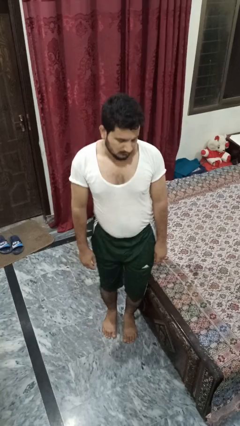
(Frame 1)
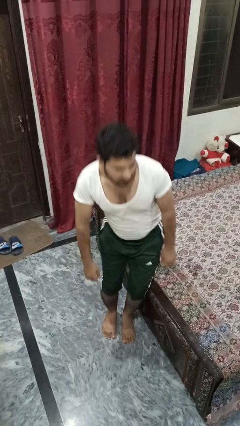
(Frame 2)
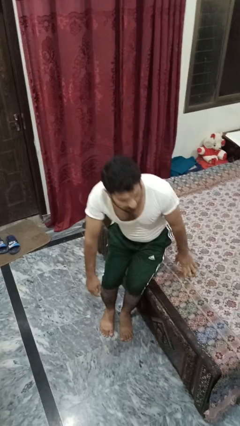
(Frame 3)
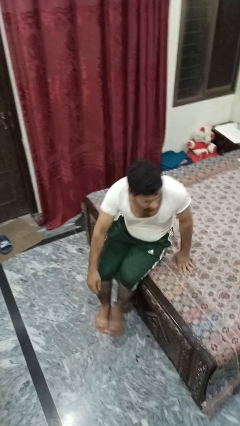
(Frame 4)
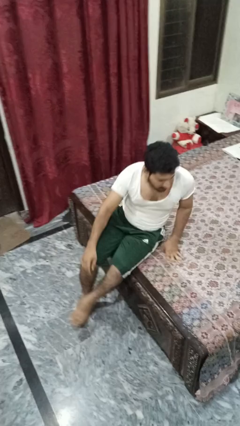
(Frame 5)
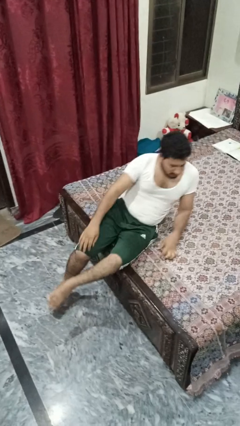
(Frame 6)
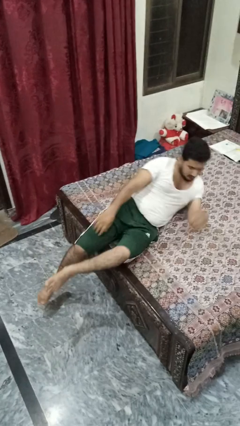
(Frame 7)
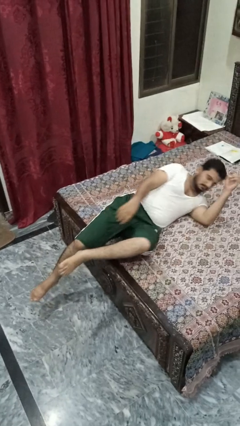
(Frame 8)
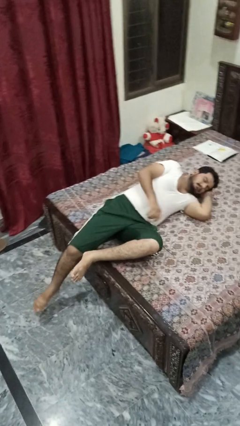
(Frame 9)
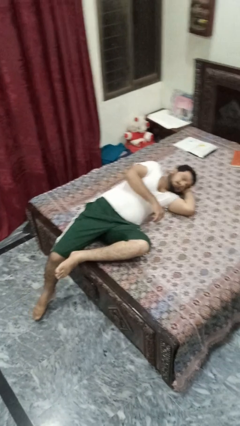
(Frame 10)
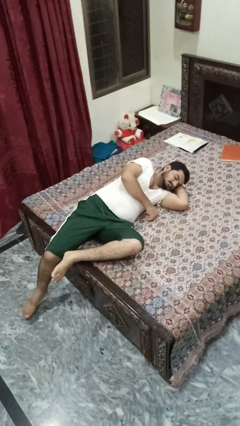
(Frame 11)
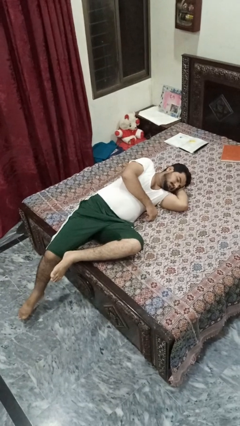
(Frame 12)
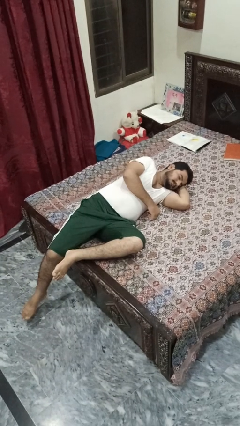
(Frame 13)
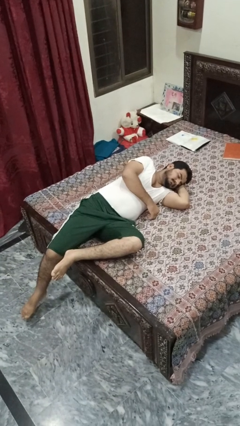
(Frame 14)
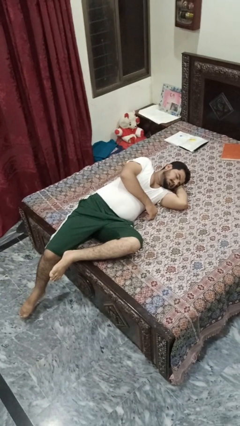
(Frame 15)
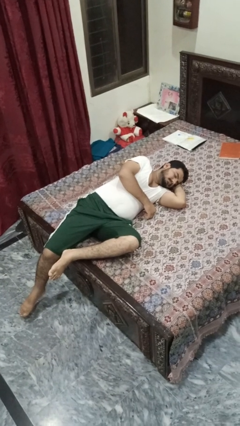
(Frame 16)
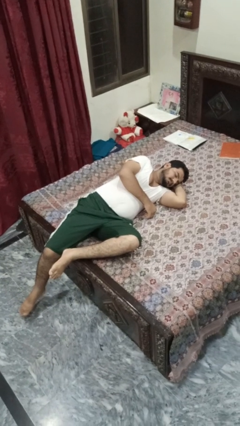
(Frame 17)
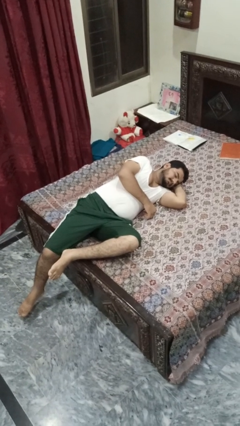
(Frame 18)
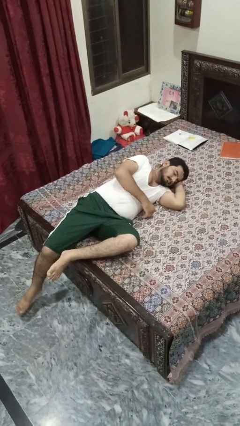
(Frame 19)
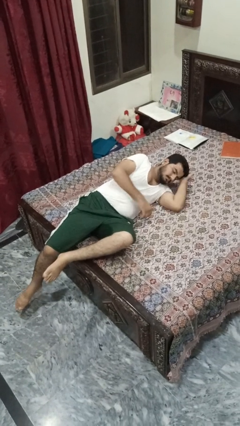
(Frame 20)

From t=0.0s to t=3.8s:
person lies down on bed

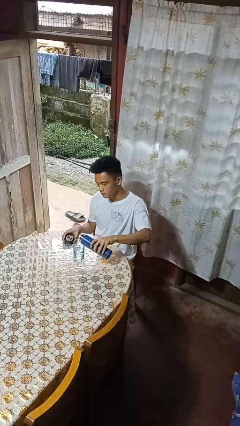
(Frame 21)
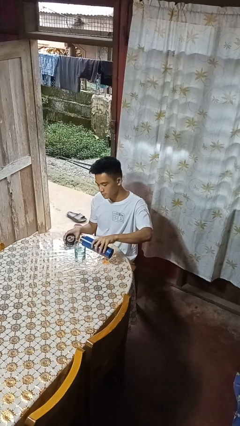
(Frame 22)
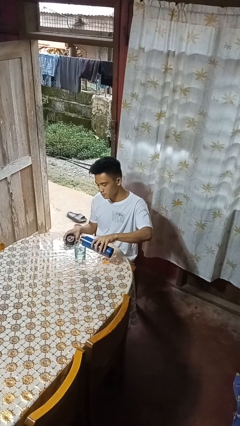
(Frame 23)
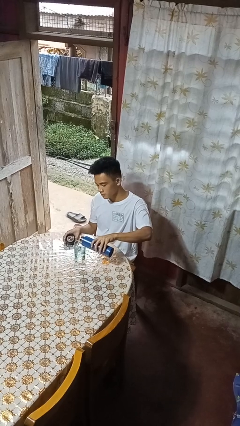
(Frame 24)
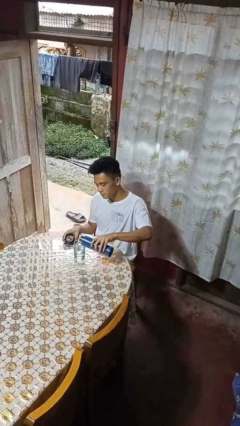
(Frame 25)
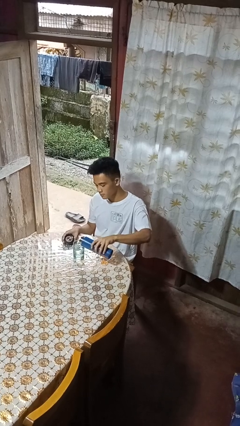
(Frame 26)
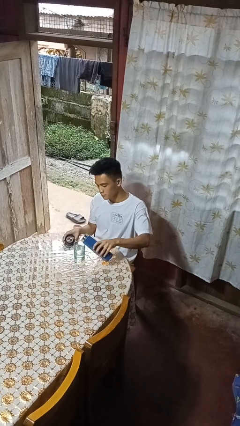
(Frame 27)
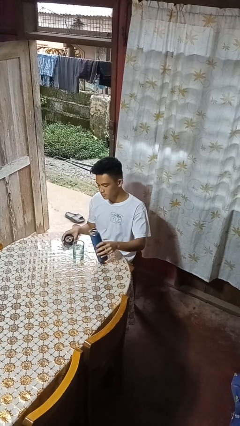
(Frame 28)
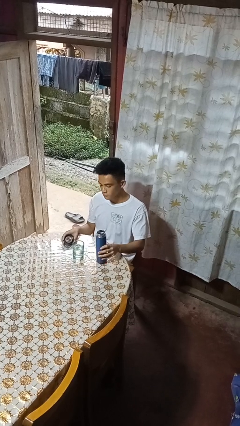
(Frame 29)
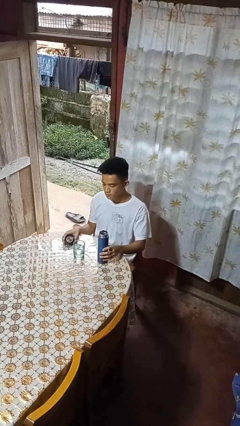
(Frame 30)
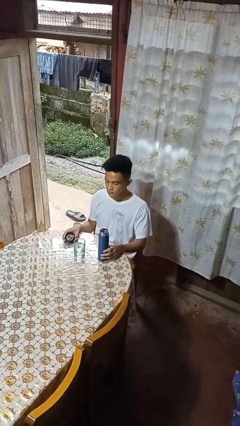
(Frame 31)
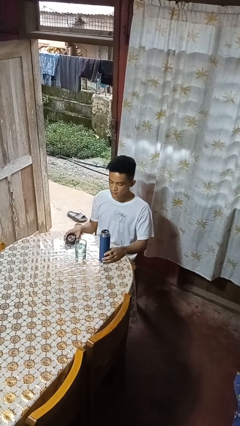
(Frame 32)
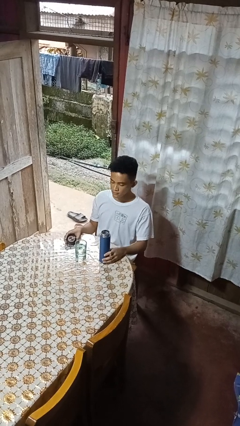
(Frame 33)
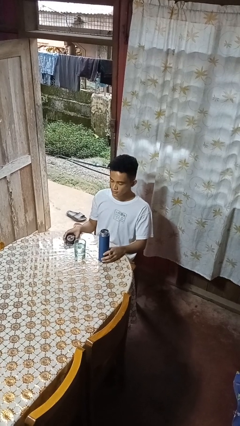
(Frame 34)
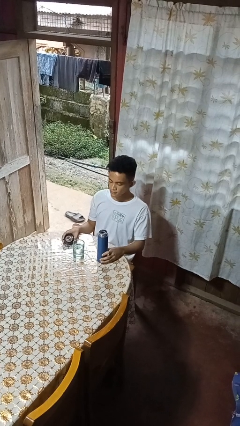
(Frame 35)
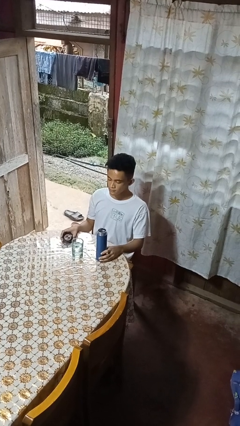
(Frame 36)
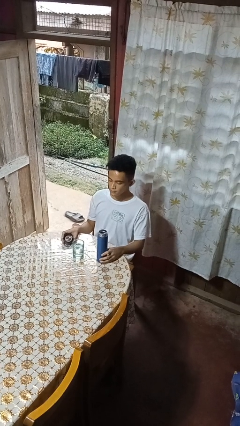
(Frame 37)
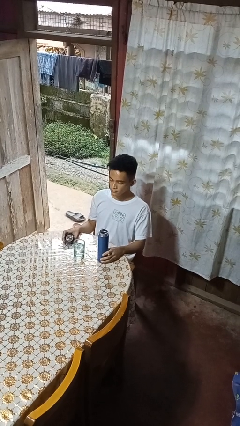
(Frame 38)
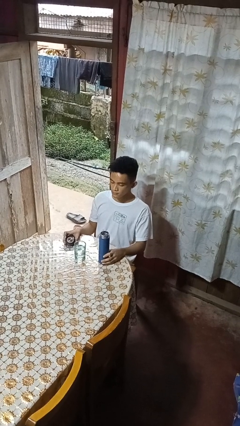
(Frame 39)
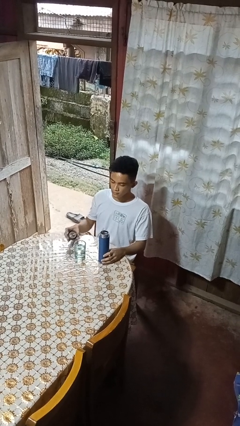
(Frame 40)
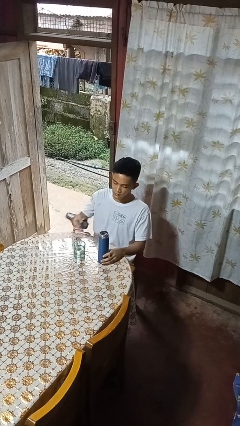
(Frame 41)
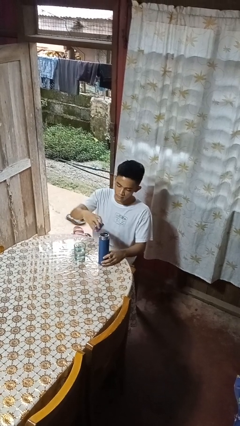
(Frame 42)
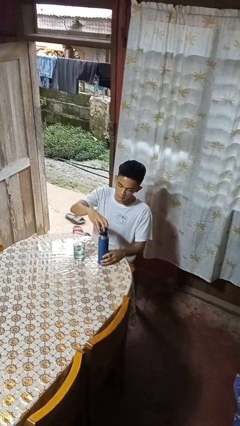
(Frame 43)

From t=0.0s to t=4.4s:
person pours liquid into cup

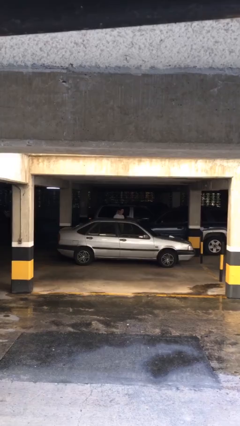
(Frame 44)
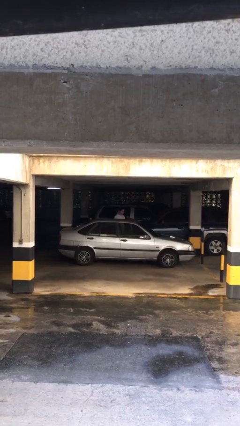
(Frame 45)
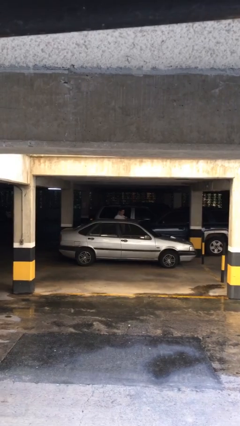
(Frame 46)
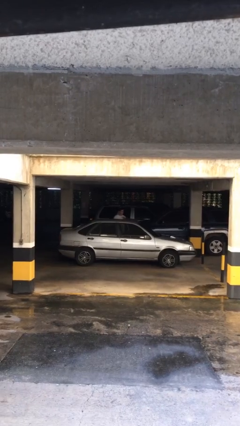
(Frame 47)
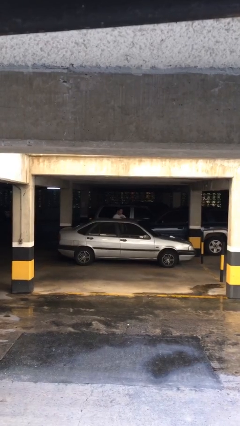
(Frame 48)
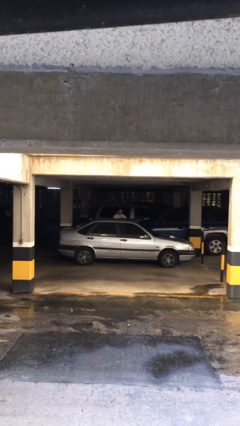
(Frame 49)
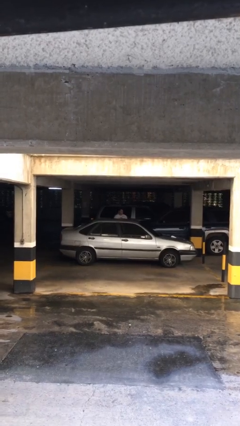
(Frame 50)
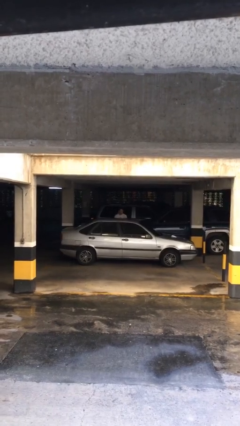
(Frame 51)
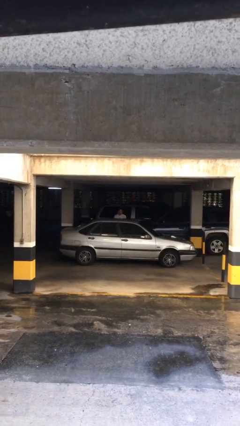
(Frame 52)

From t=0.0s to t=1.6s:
person closes car door

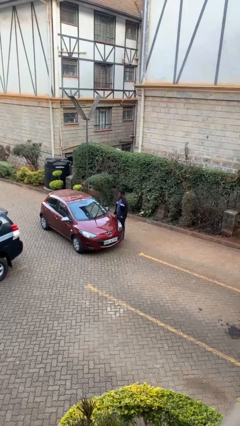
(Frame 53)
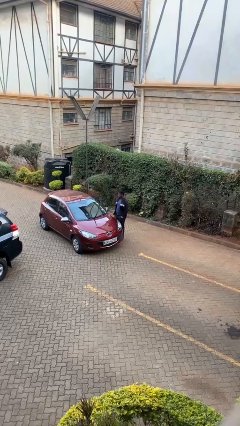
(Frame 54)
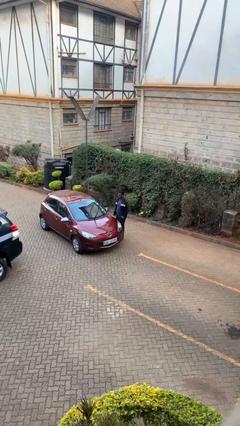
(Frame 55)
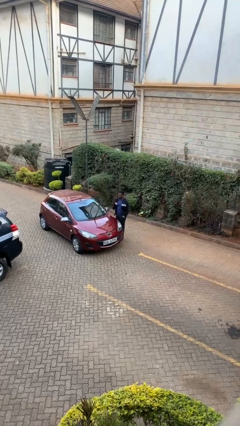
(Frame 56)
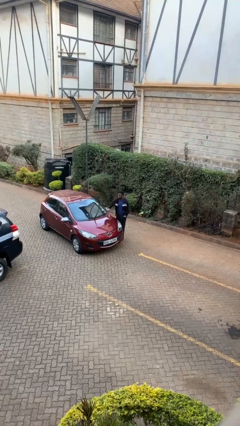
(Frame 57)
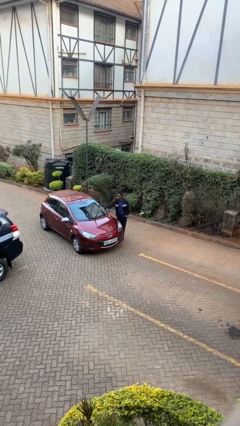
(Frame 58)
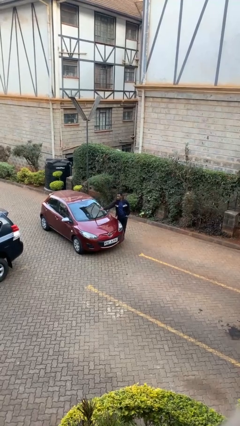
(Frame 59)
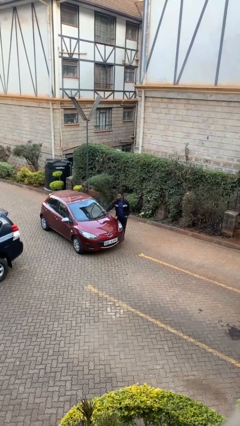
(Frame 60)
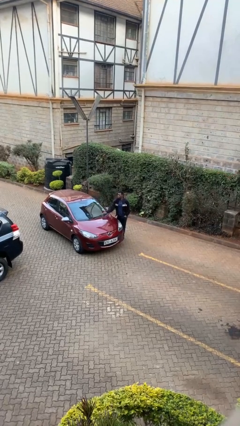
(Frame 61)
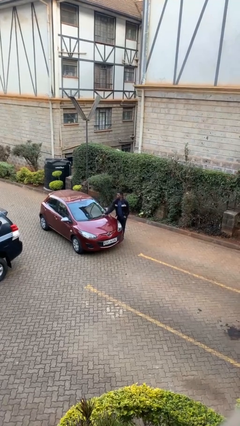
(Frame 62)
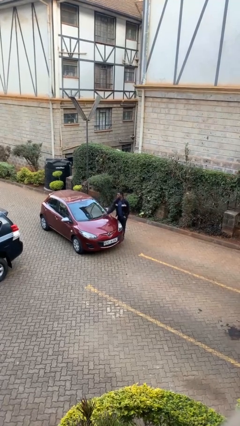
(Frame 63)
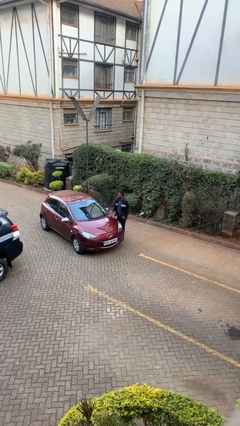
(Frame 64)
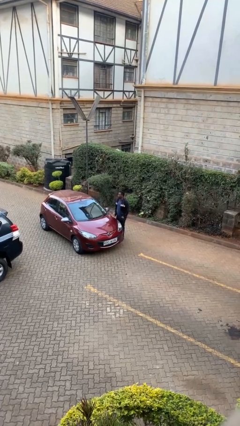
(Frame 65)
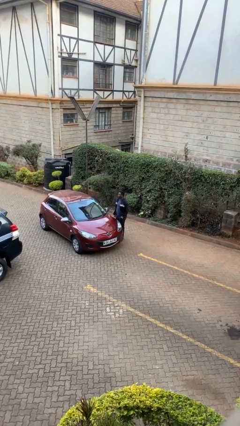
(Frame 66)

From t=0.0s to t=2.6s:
person flips down car wipers

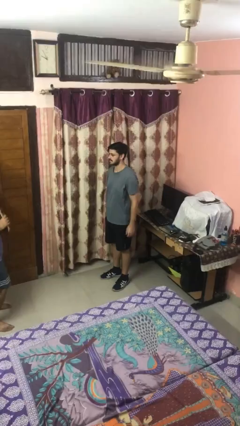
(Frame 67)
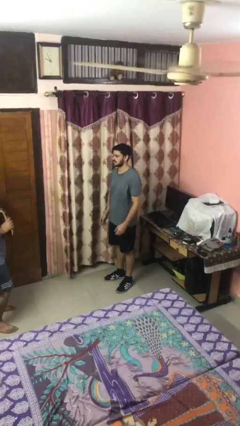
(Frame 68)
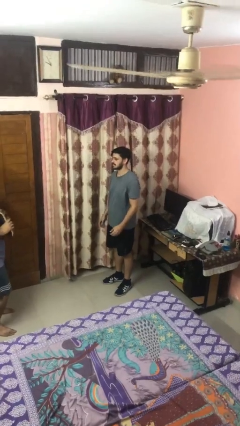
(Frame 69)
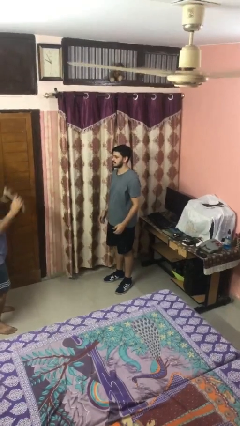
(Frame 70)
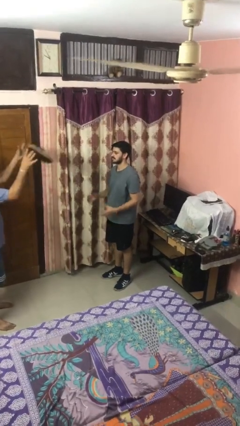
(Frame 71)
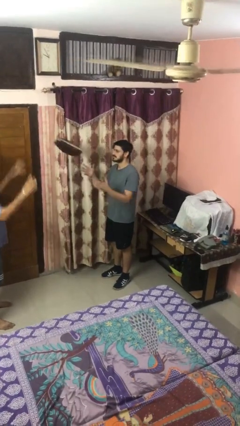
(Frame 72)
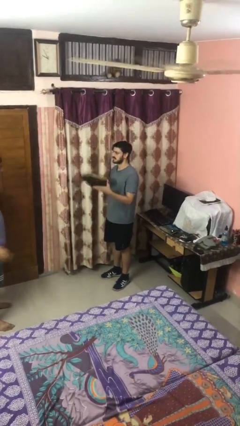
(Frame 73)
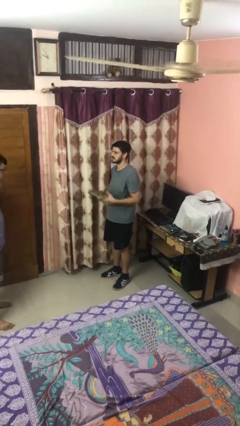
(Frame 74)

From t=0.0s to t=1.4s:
person catches object from person

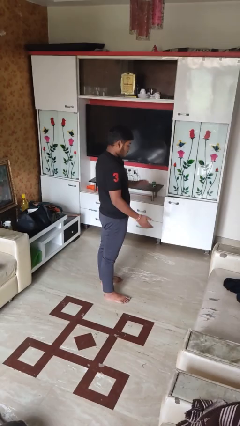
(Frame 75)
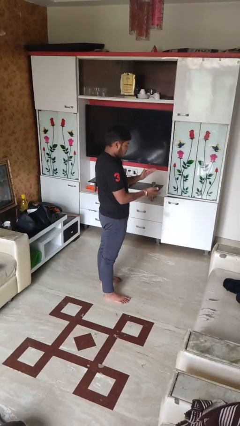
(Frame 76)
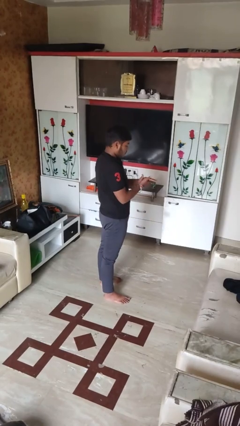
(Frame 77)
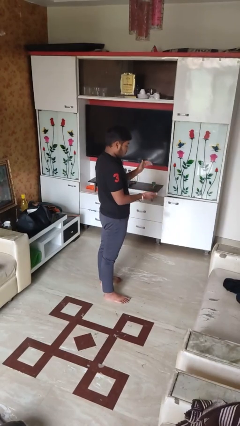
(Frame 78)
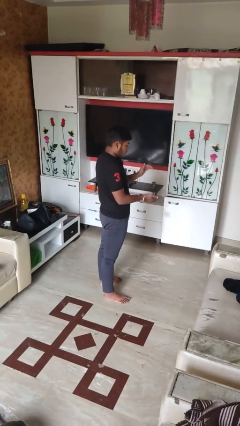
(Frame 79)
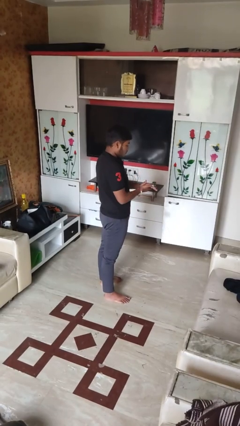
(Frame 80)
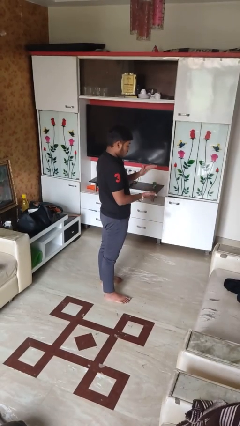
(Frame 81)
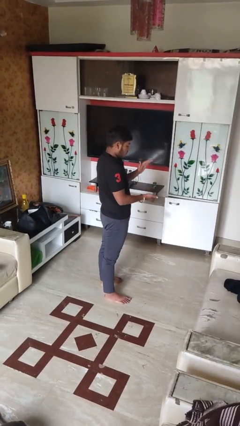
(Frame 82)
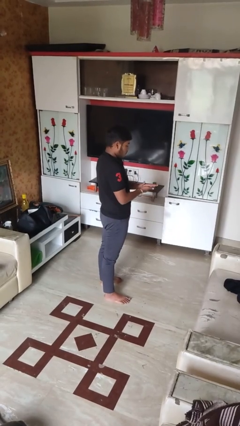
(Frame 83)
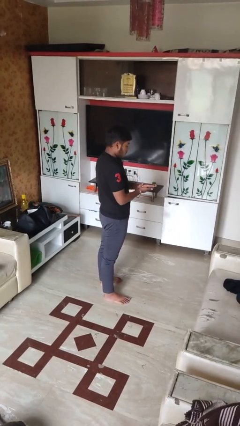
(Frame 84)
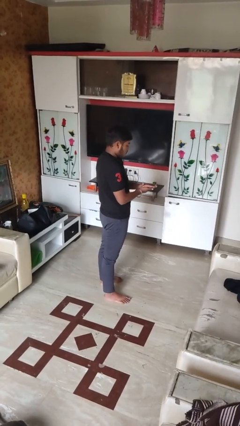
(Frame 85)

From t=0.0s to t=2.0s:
person claps hands

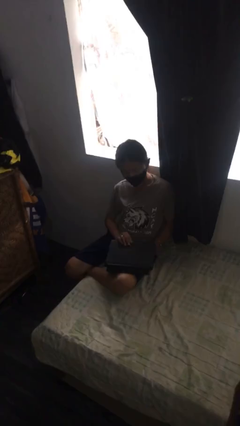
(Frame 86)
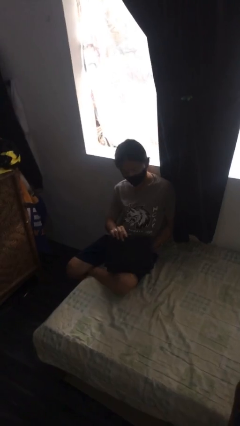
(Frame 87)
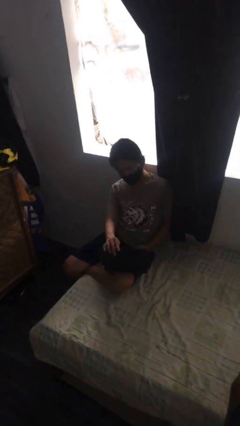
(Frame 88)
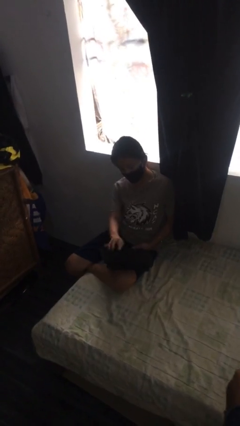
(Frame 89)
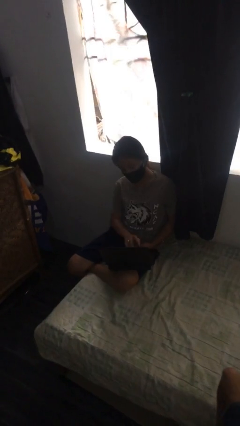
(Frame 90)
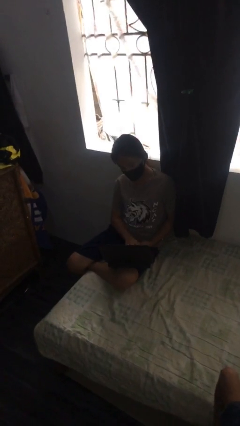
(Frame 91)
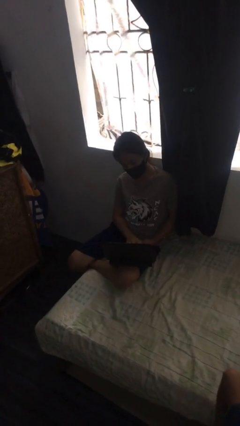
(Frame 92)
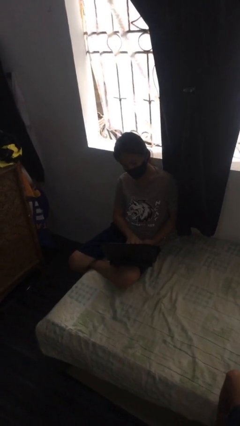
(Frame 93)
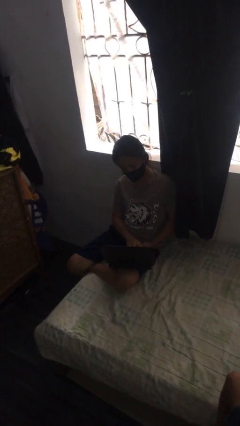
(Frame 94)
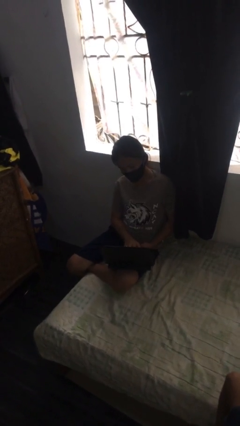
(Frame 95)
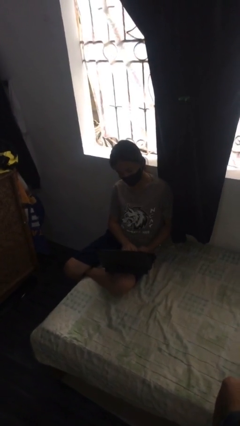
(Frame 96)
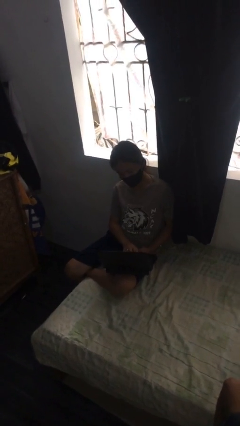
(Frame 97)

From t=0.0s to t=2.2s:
person interacts with laptop
